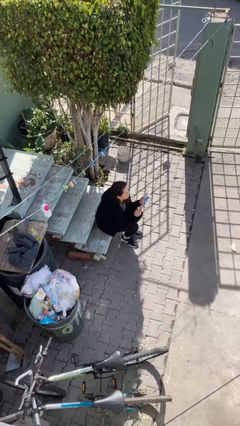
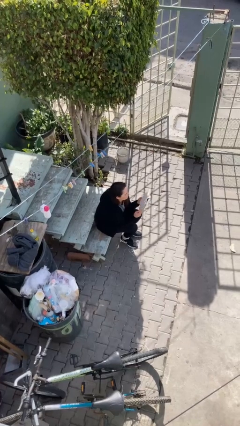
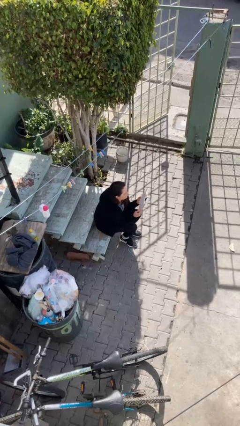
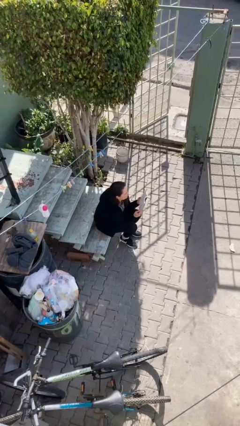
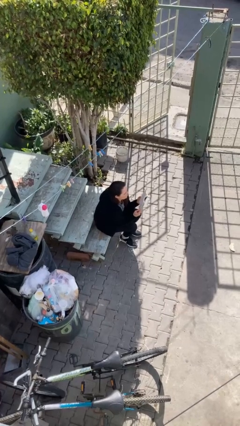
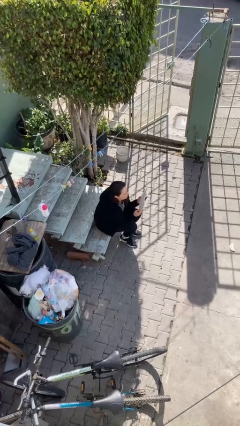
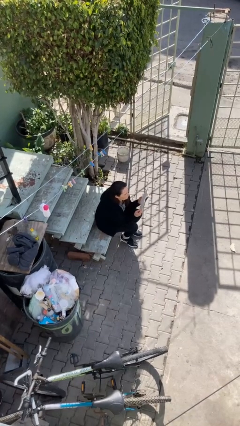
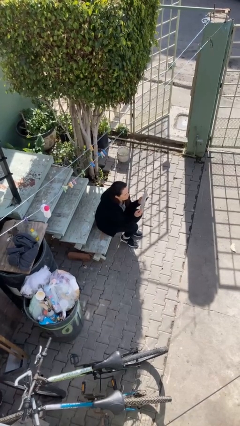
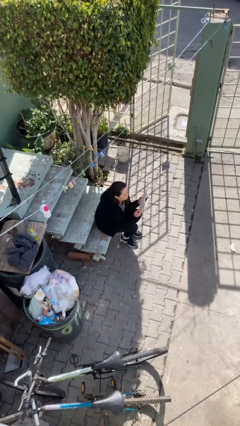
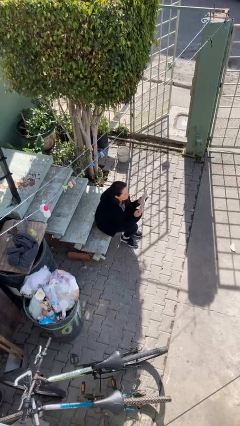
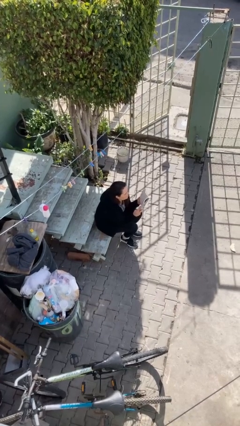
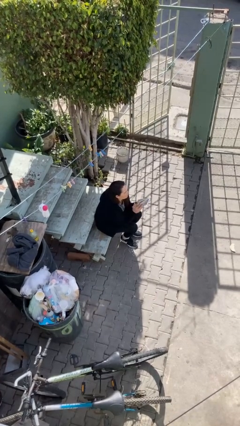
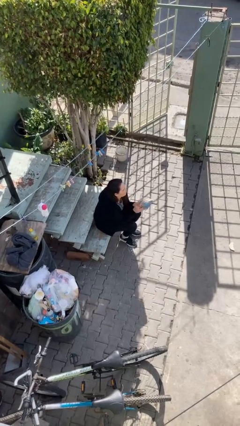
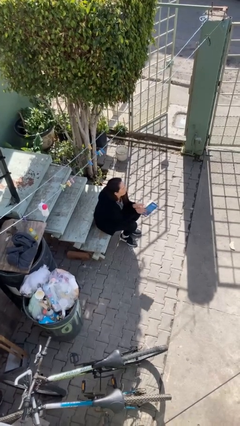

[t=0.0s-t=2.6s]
person reads document

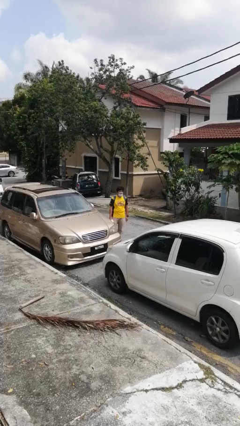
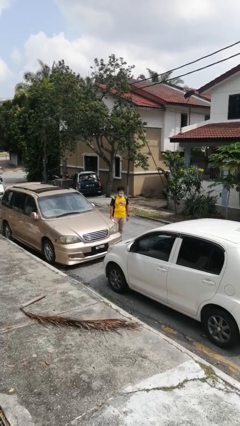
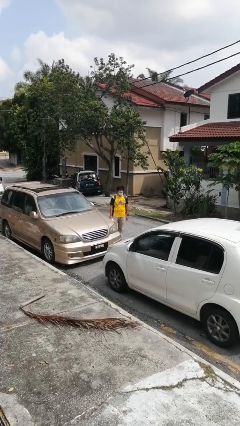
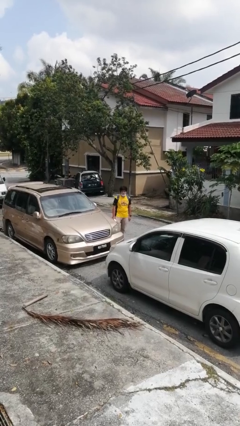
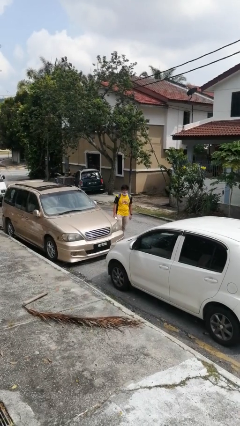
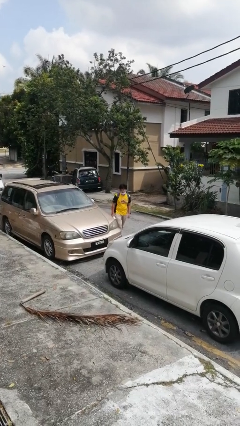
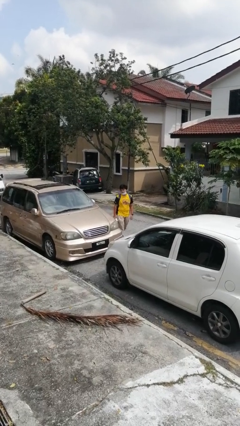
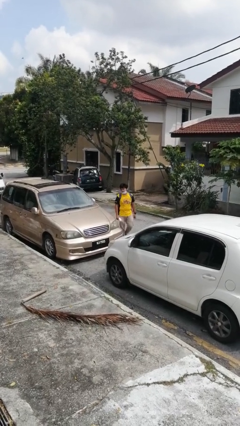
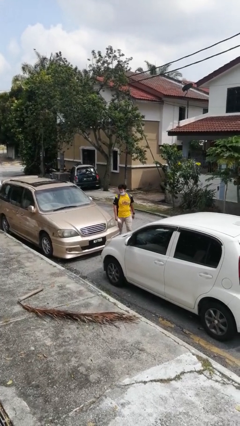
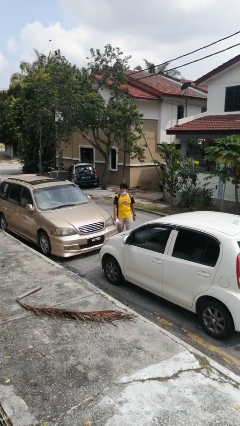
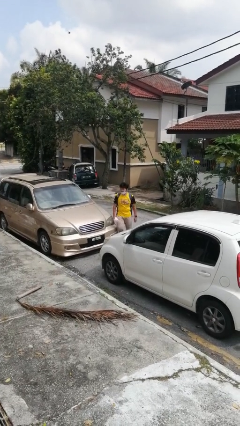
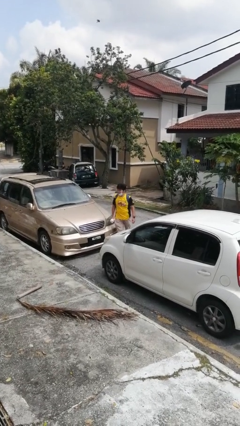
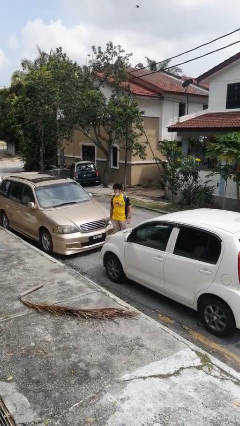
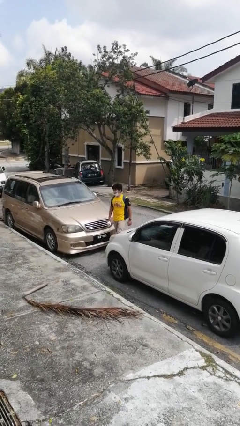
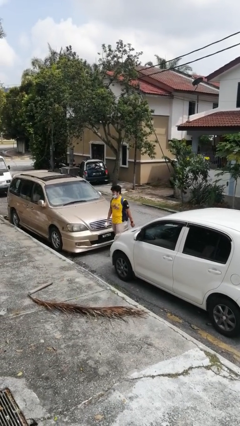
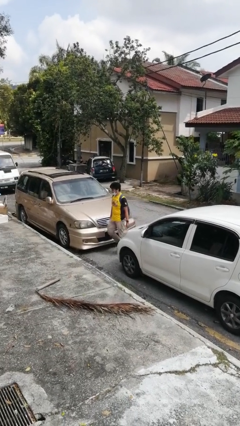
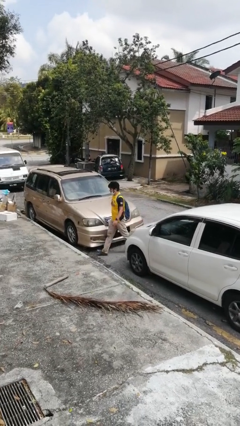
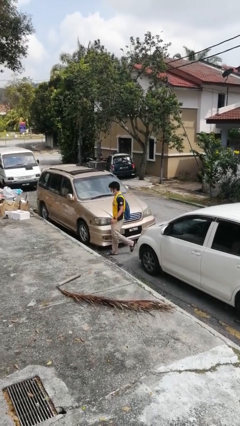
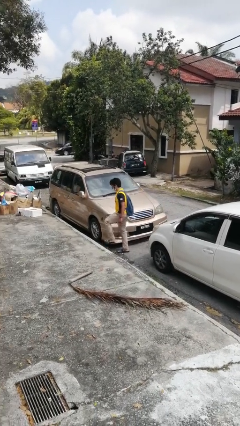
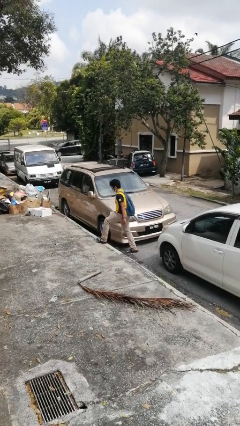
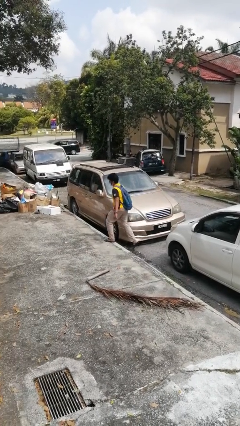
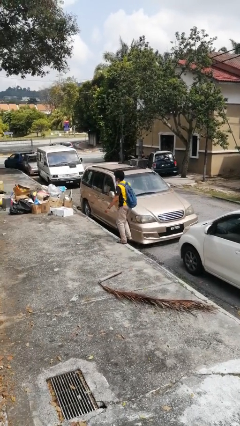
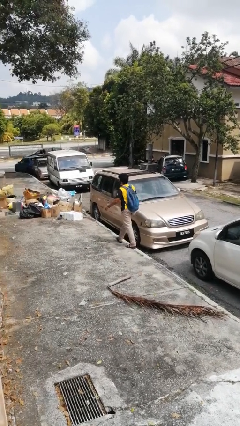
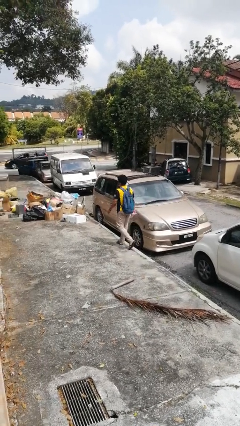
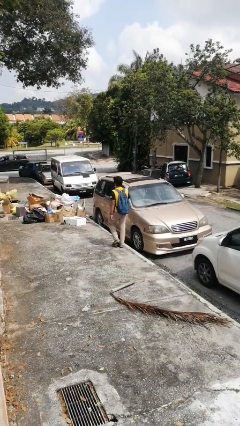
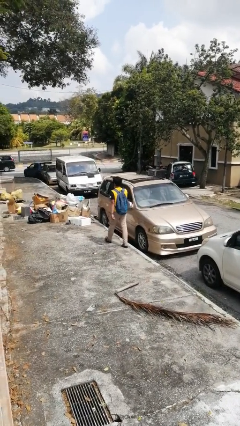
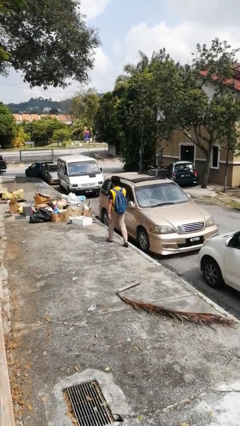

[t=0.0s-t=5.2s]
person walks around car

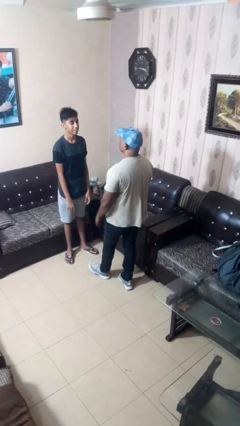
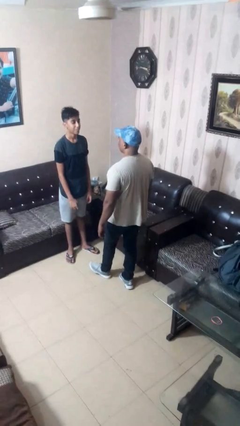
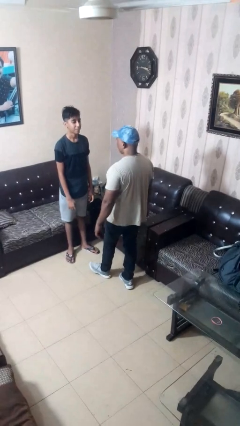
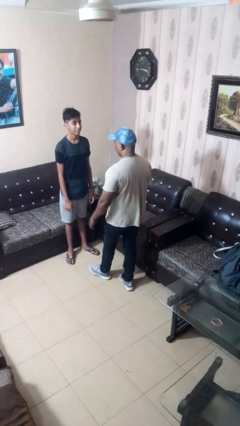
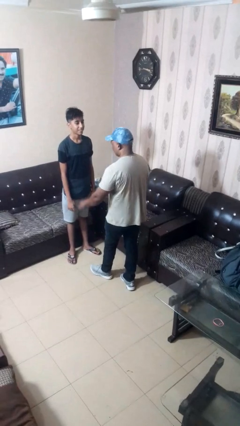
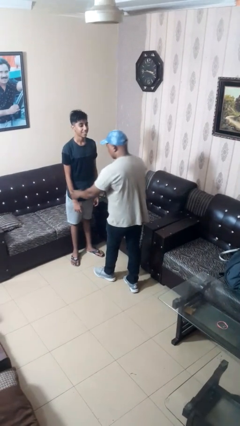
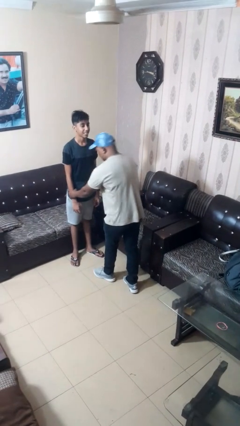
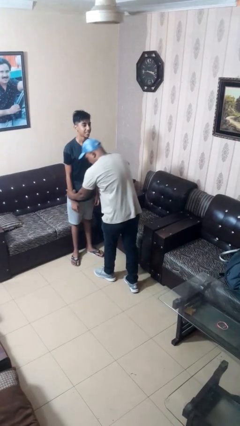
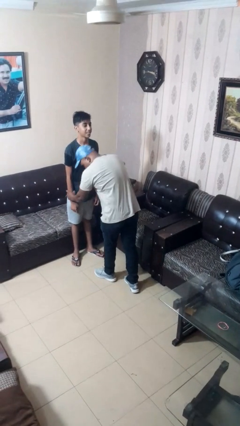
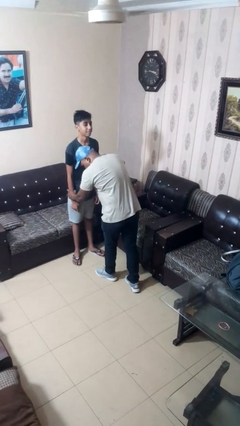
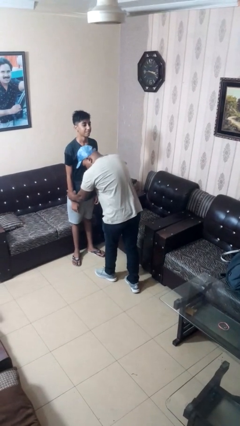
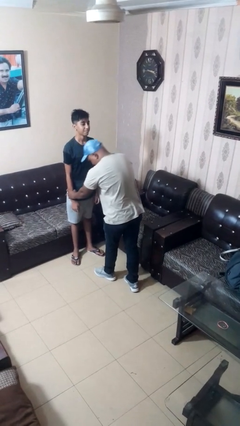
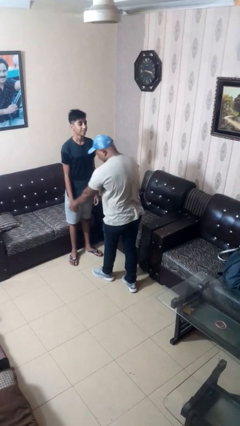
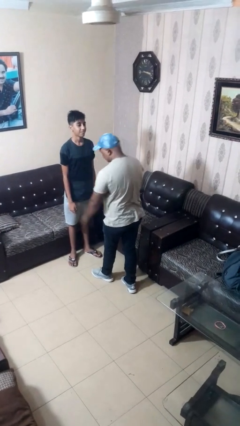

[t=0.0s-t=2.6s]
person grabs person by forearm

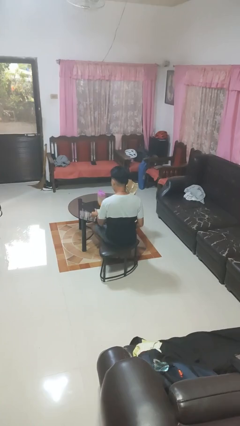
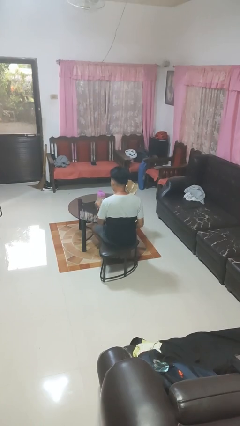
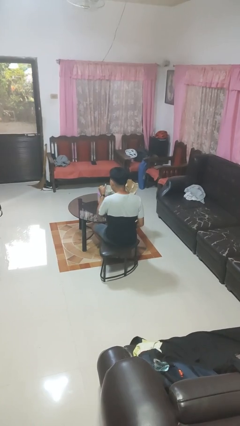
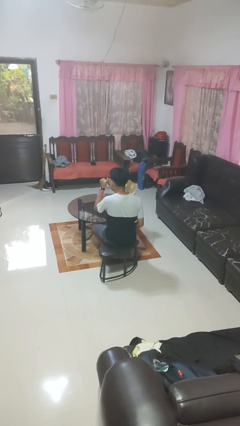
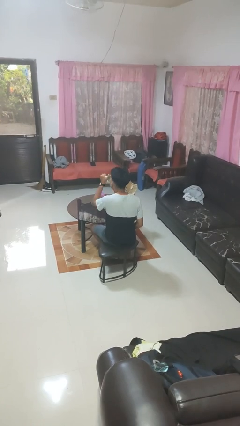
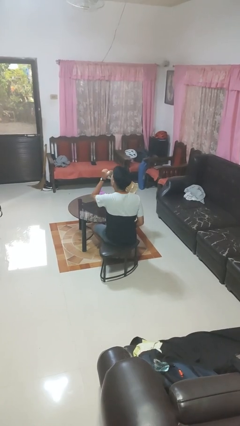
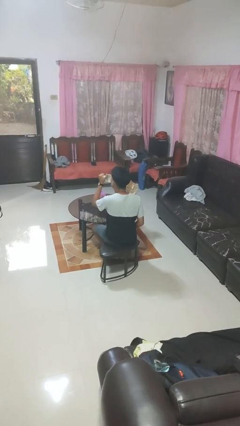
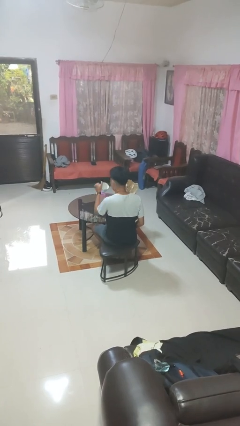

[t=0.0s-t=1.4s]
person drinks from mug

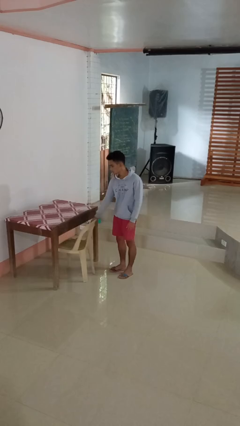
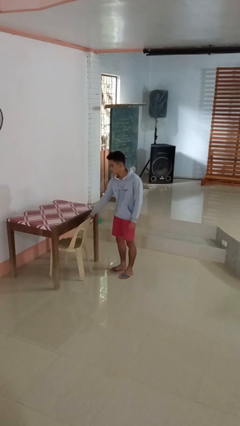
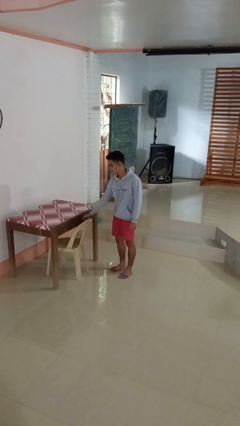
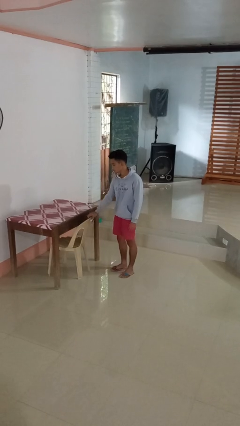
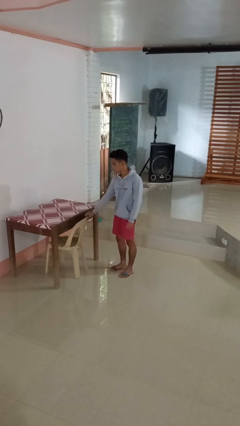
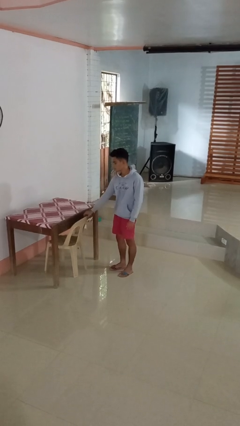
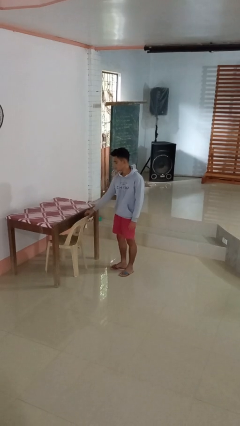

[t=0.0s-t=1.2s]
person pushes in chair

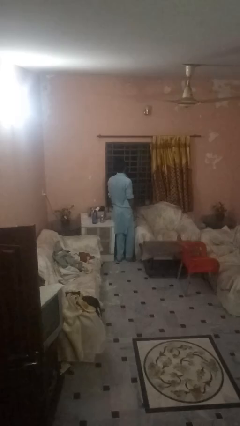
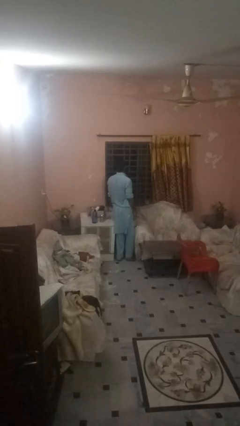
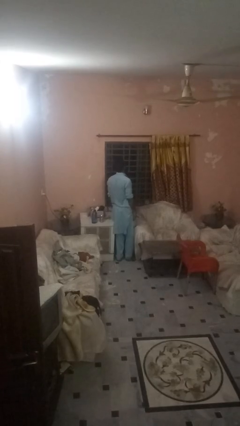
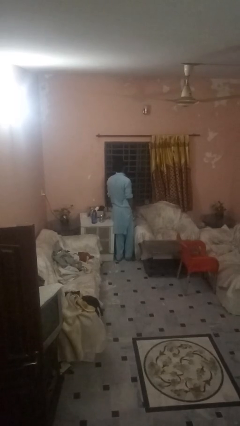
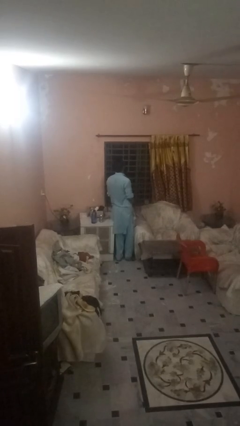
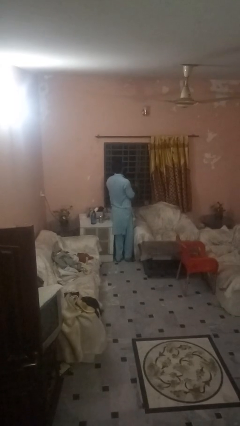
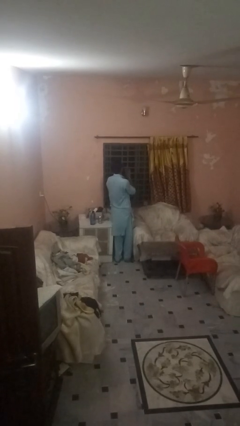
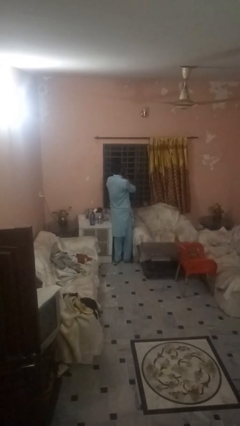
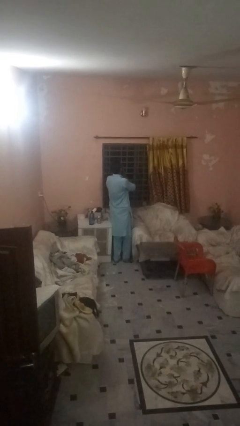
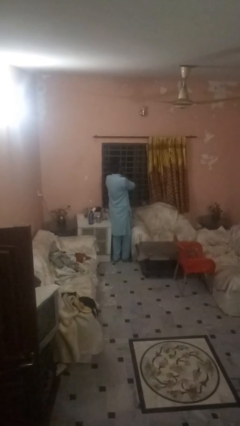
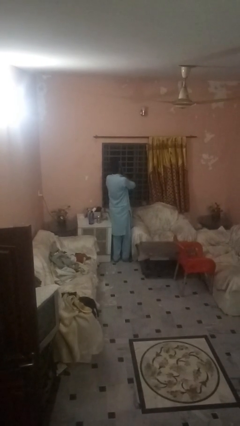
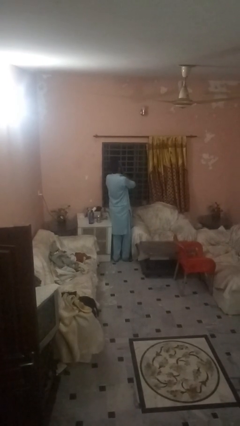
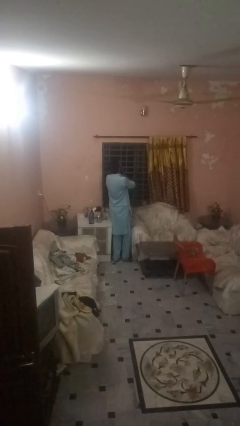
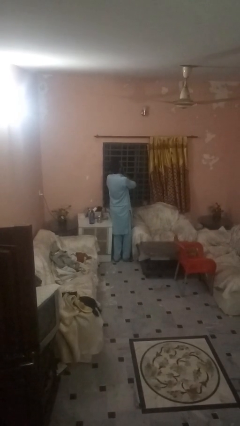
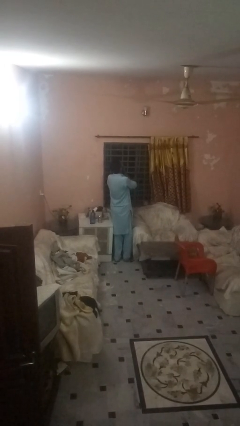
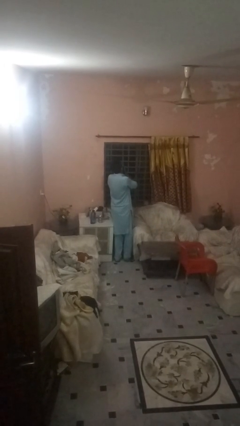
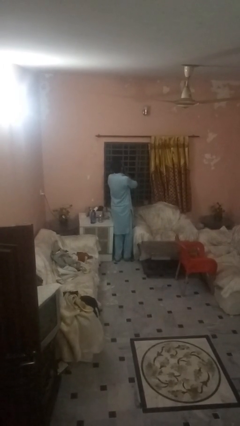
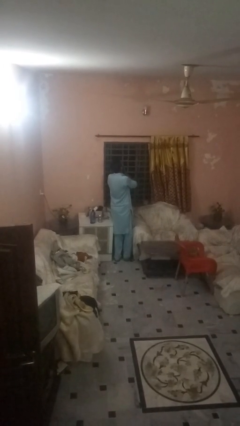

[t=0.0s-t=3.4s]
person covers face with hands

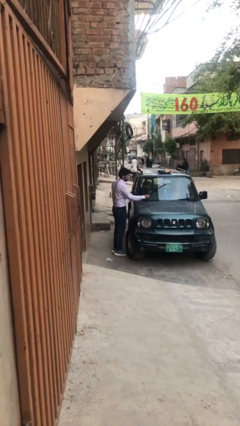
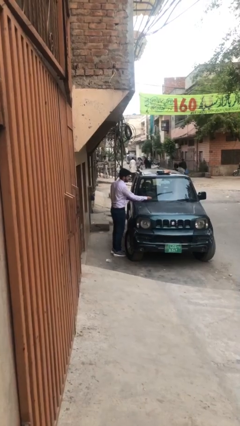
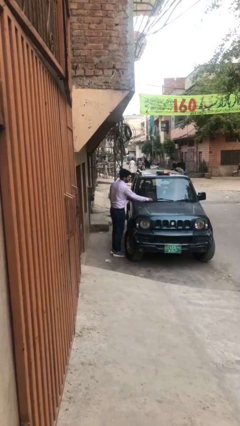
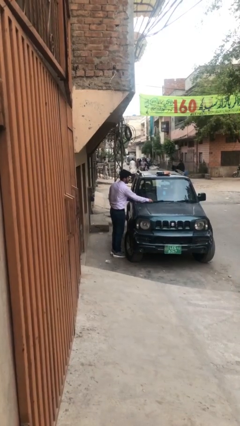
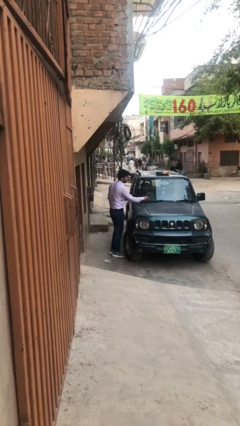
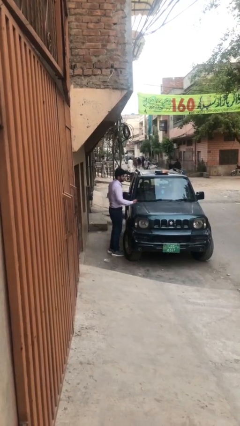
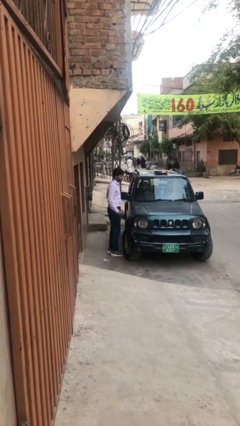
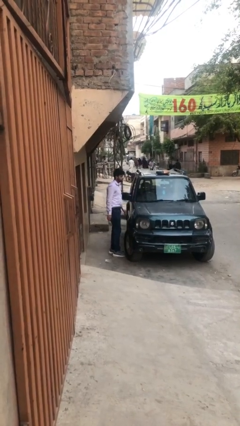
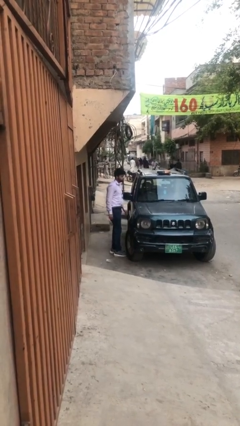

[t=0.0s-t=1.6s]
person flips down car wipers
